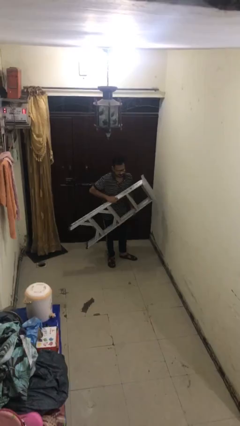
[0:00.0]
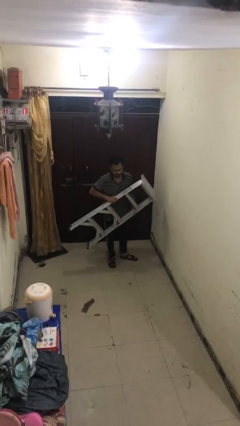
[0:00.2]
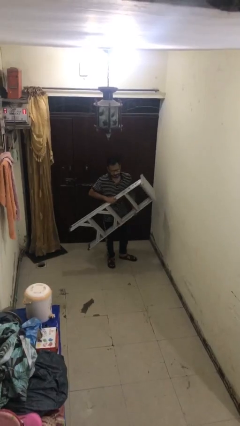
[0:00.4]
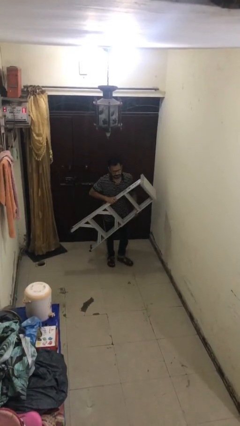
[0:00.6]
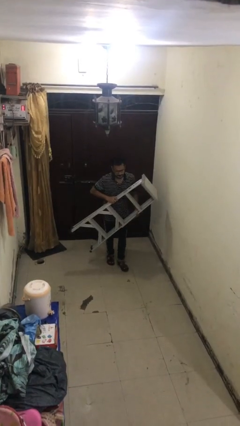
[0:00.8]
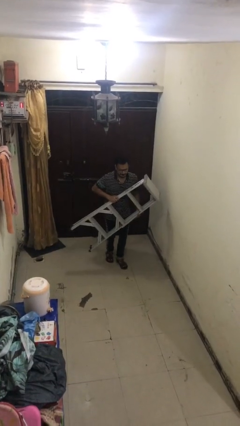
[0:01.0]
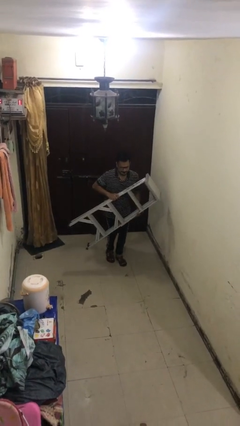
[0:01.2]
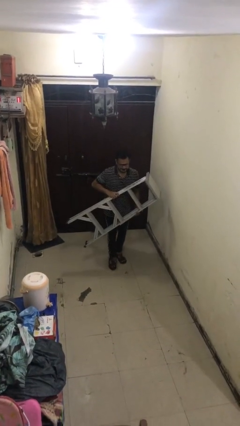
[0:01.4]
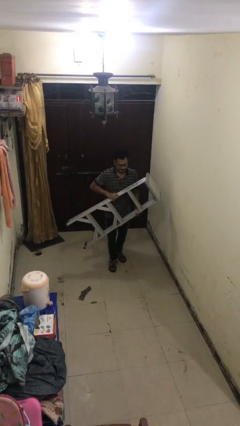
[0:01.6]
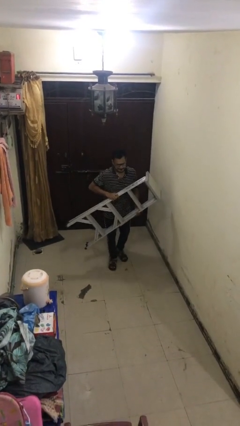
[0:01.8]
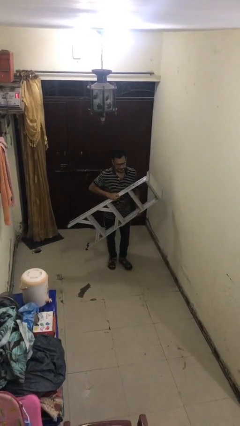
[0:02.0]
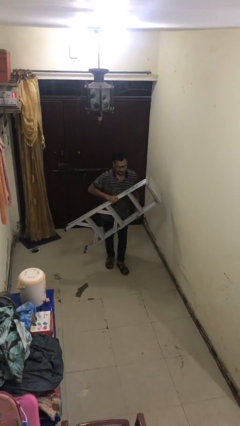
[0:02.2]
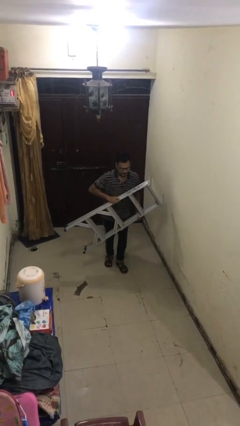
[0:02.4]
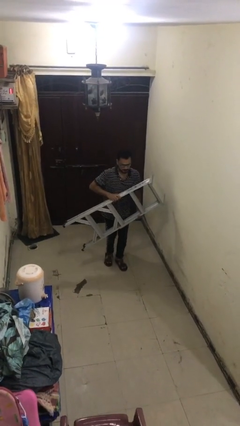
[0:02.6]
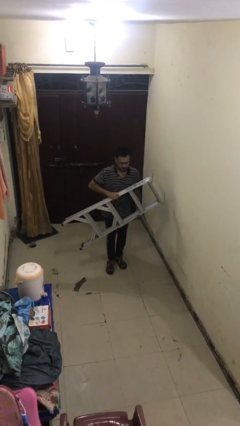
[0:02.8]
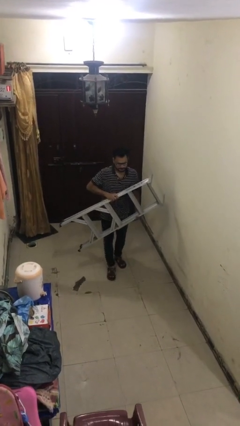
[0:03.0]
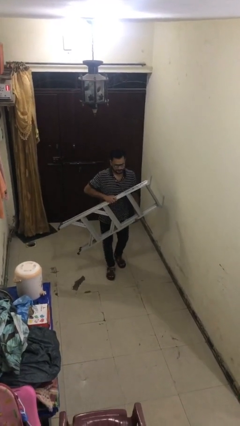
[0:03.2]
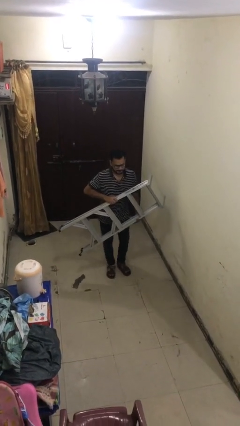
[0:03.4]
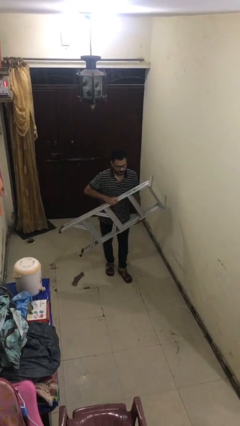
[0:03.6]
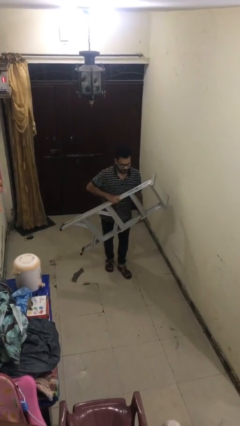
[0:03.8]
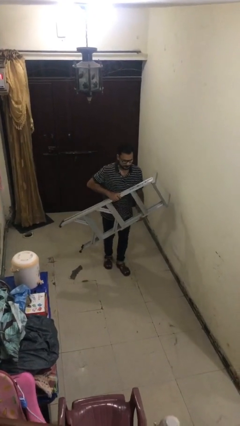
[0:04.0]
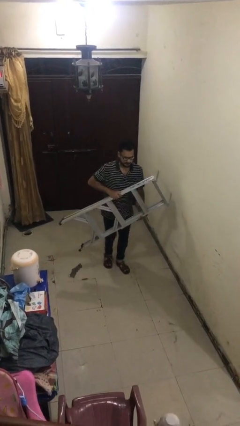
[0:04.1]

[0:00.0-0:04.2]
person carries heavy object

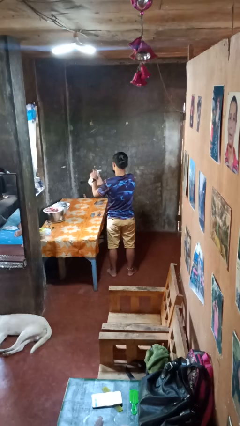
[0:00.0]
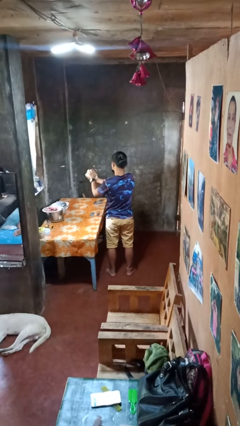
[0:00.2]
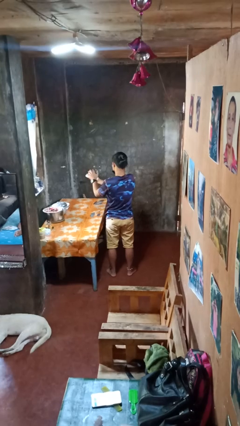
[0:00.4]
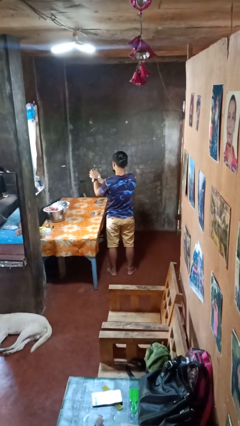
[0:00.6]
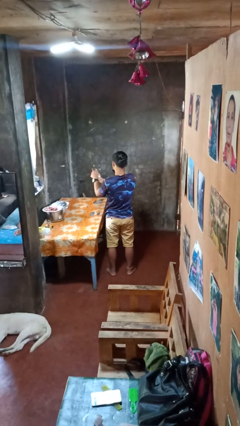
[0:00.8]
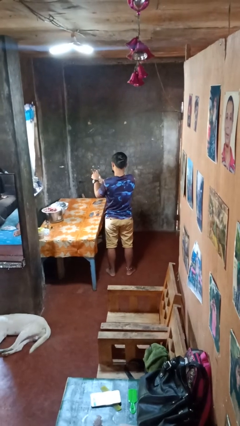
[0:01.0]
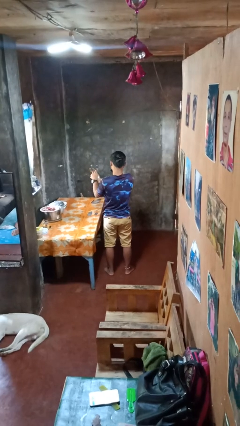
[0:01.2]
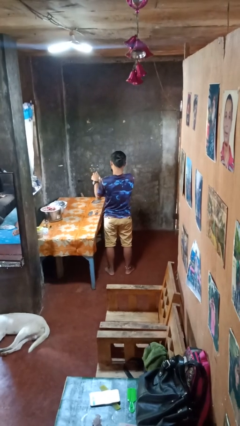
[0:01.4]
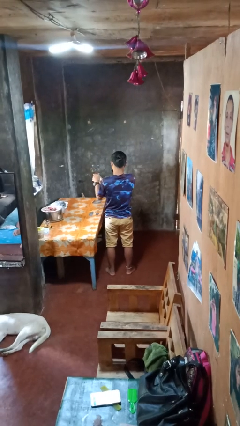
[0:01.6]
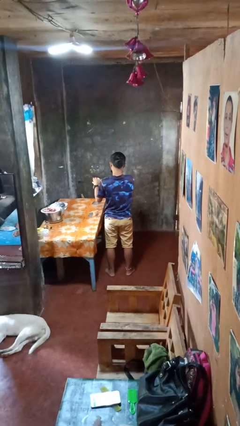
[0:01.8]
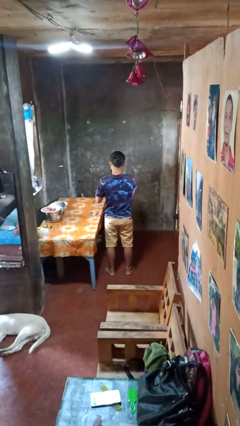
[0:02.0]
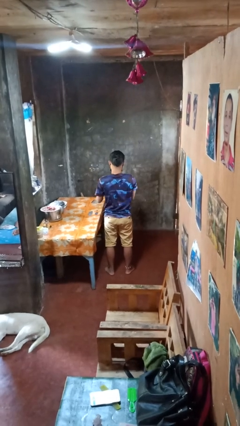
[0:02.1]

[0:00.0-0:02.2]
person crumples paper

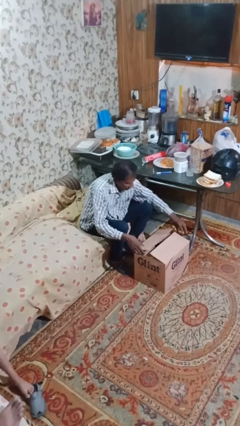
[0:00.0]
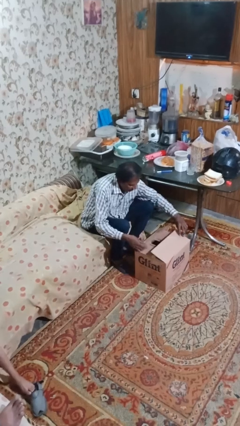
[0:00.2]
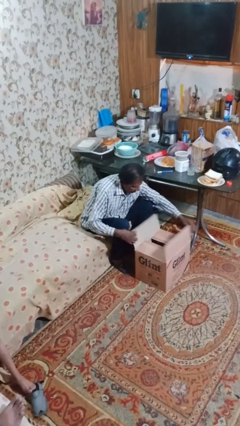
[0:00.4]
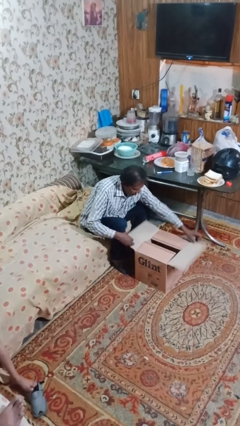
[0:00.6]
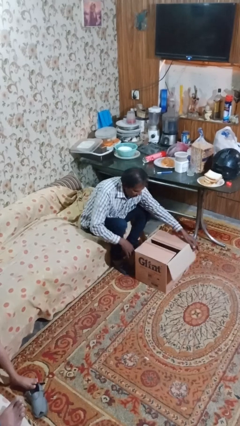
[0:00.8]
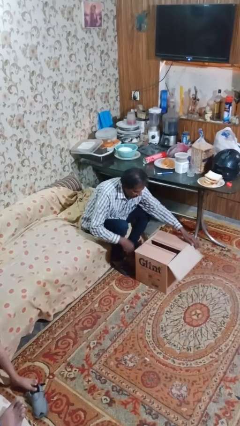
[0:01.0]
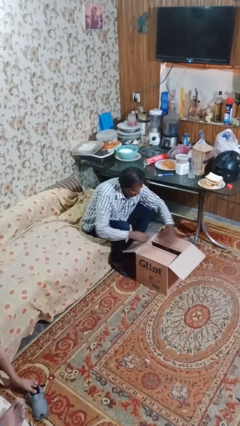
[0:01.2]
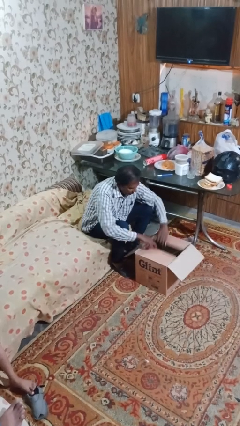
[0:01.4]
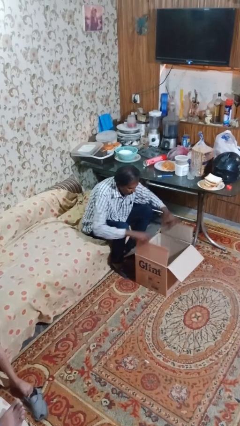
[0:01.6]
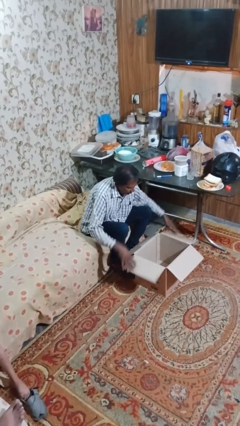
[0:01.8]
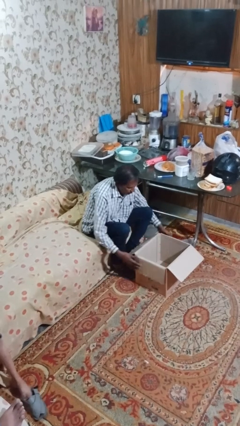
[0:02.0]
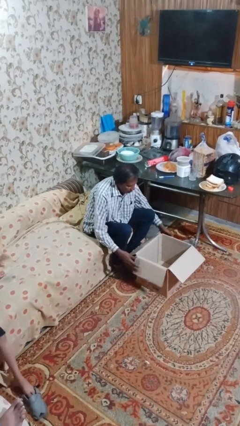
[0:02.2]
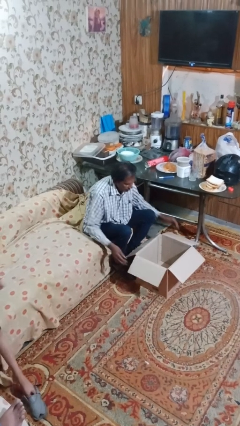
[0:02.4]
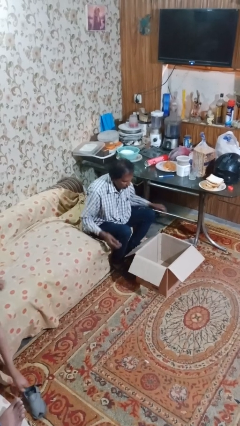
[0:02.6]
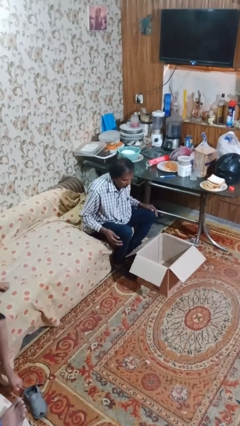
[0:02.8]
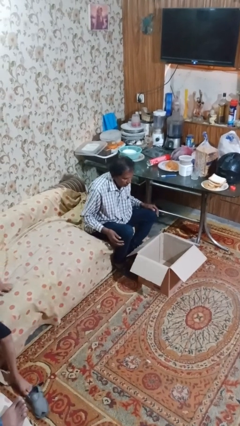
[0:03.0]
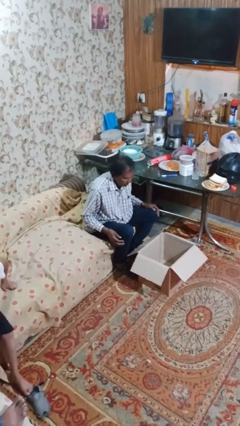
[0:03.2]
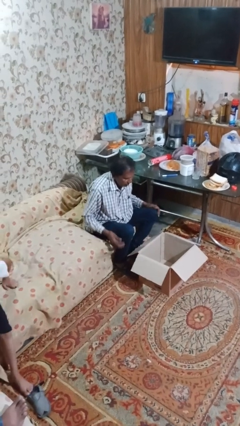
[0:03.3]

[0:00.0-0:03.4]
person opens box

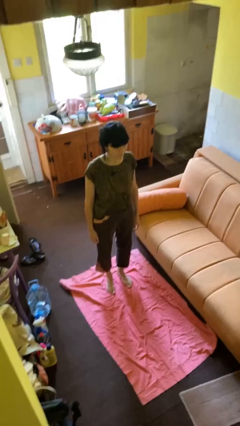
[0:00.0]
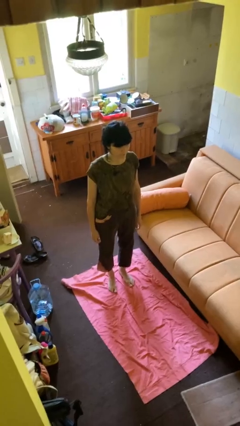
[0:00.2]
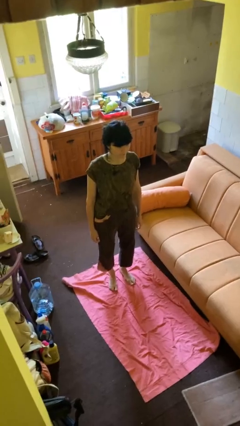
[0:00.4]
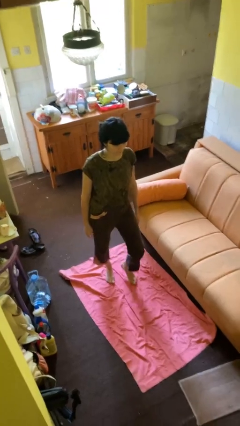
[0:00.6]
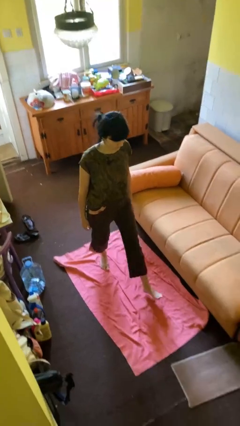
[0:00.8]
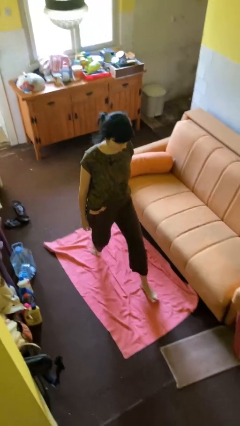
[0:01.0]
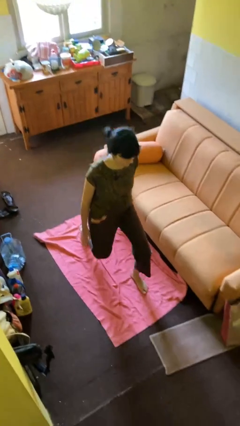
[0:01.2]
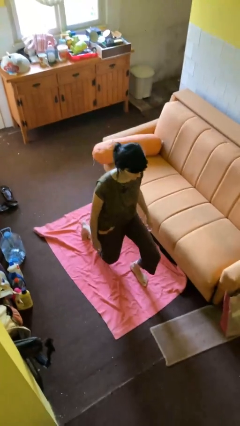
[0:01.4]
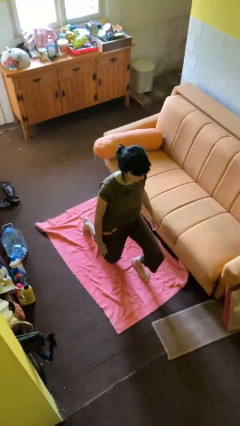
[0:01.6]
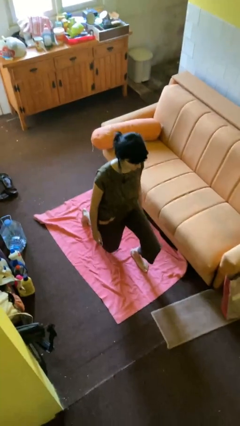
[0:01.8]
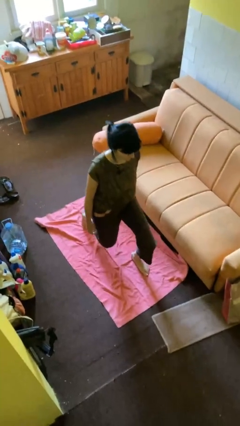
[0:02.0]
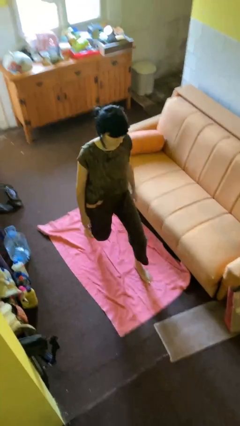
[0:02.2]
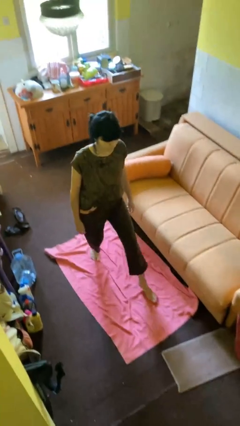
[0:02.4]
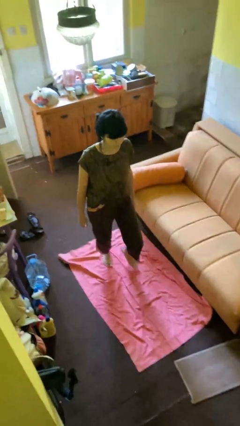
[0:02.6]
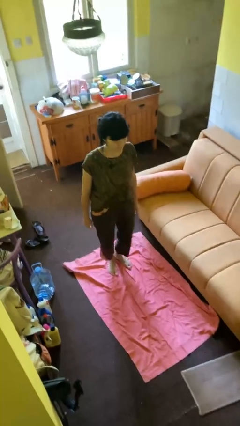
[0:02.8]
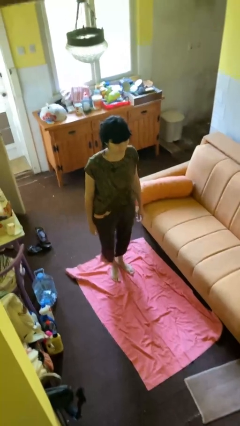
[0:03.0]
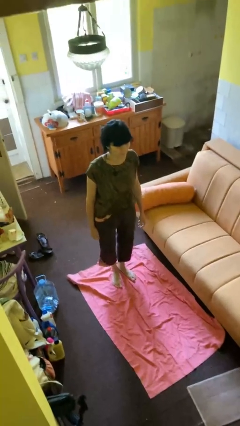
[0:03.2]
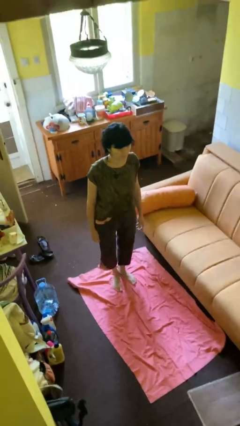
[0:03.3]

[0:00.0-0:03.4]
person exercises with lunges

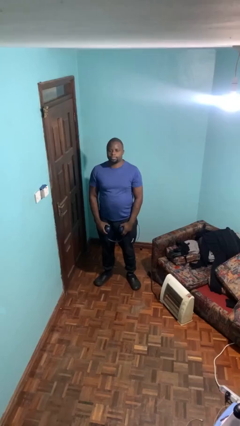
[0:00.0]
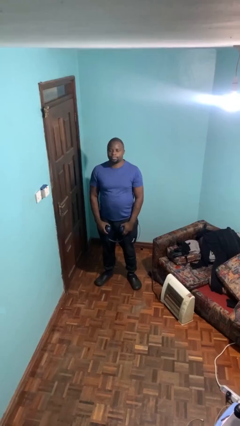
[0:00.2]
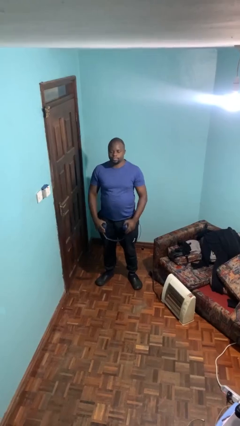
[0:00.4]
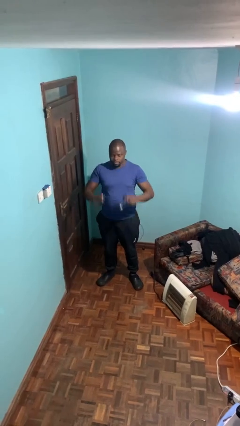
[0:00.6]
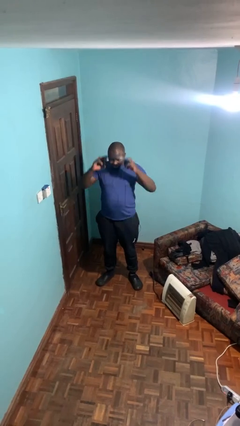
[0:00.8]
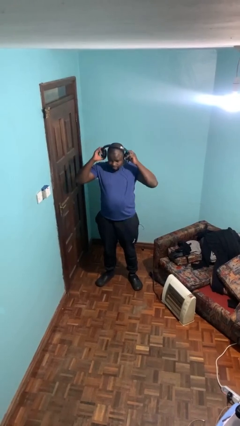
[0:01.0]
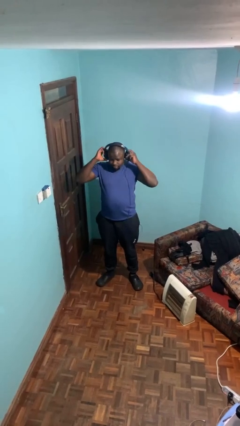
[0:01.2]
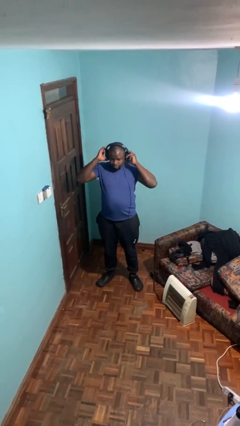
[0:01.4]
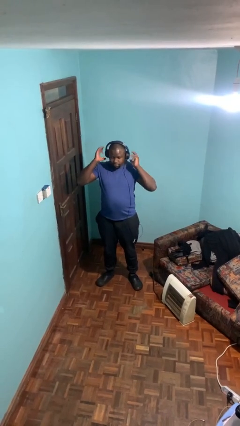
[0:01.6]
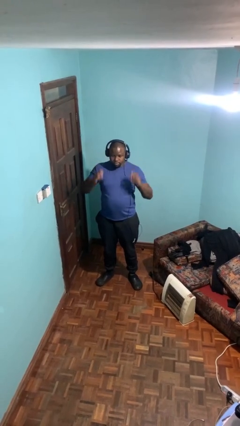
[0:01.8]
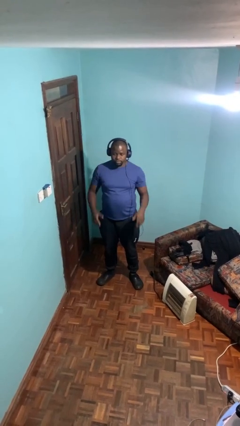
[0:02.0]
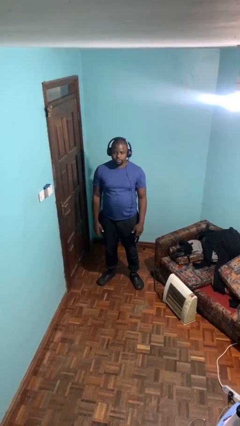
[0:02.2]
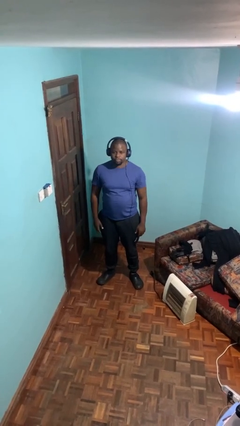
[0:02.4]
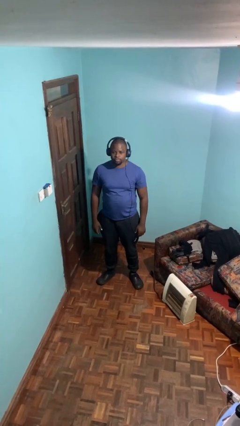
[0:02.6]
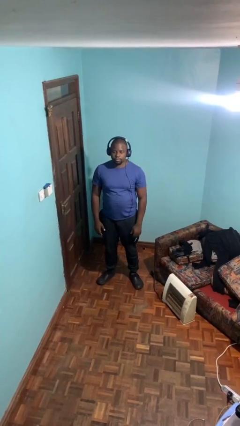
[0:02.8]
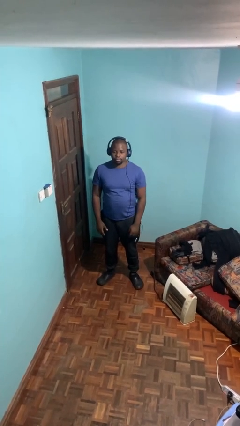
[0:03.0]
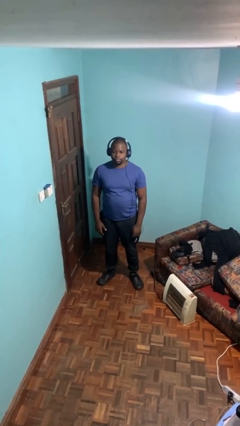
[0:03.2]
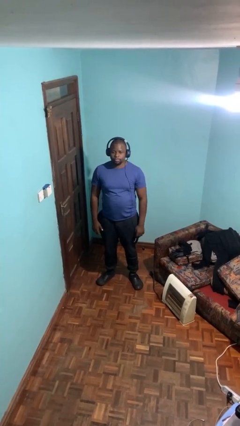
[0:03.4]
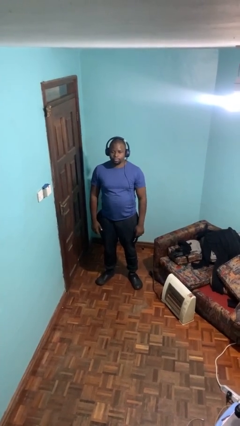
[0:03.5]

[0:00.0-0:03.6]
person puts on headphones

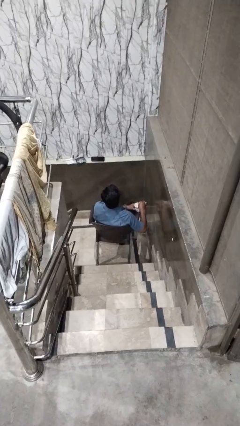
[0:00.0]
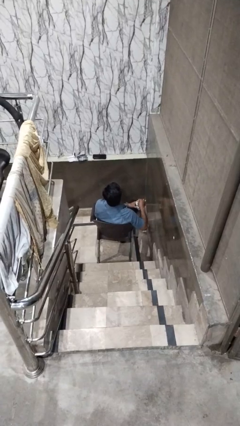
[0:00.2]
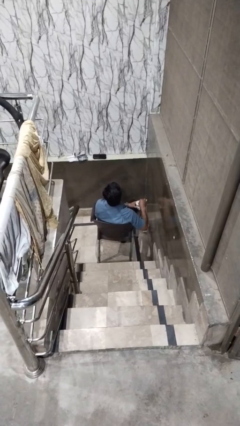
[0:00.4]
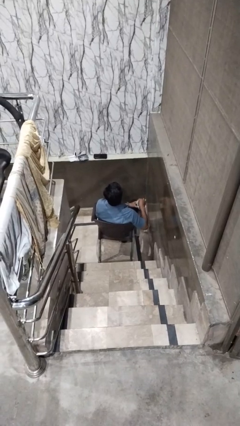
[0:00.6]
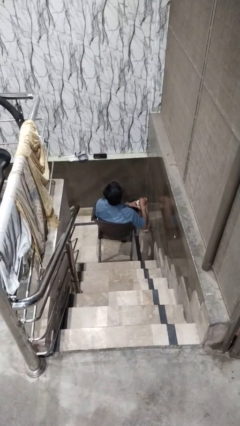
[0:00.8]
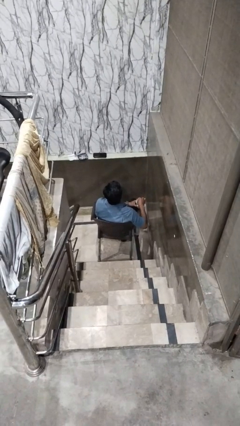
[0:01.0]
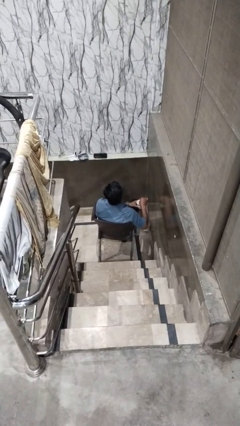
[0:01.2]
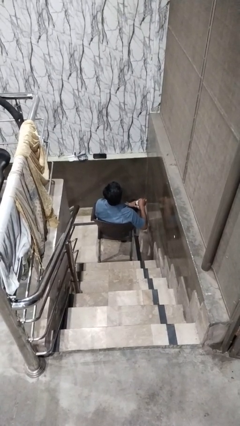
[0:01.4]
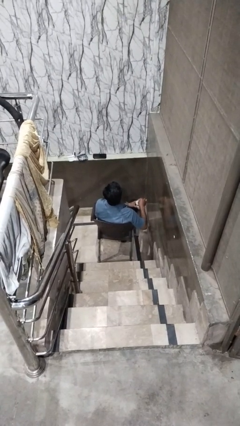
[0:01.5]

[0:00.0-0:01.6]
person stirs mug
